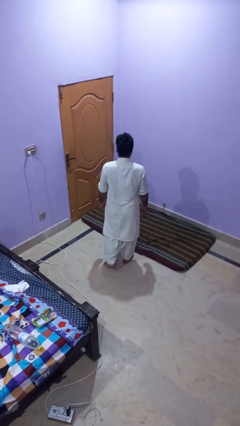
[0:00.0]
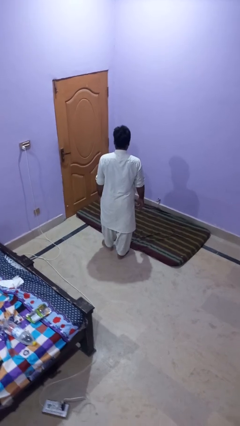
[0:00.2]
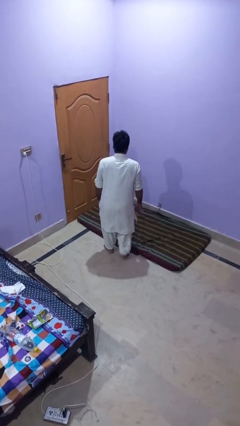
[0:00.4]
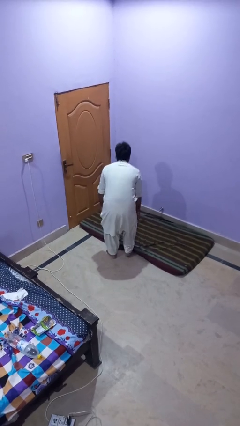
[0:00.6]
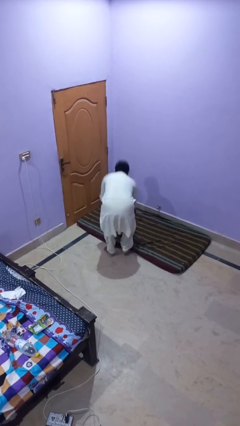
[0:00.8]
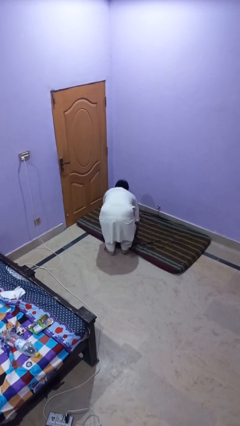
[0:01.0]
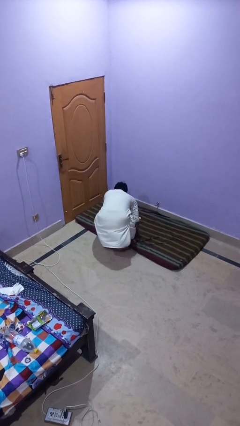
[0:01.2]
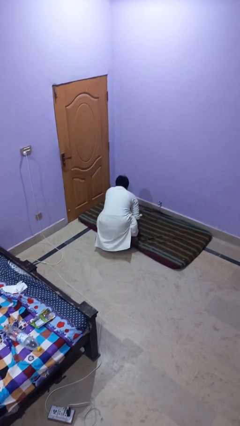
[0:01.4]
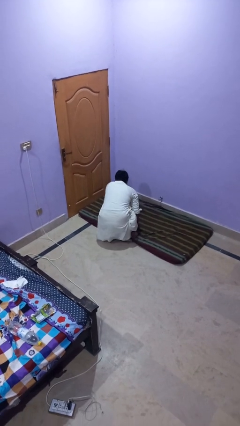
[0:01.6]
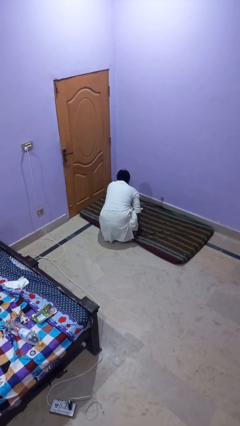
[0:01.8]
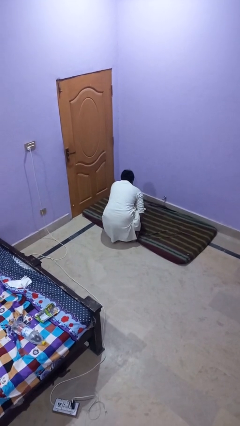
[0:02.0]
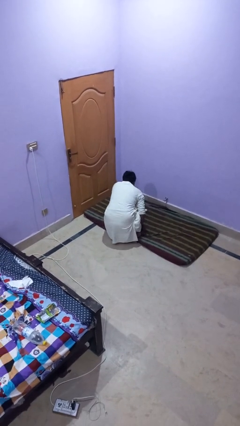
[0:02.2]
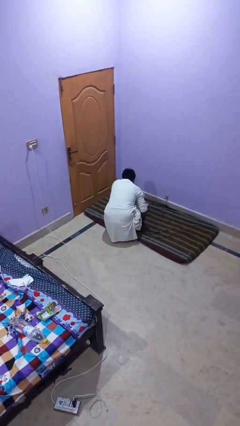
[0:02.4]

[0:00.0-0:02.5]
person trips on object on floor

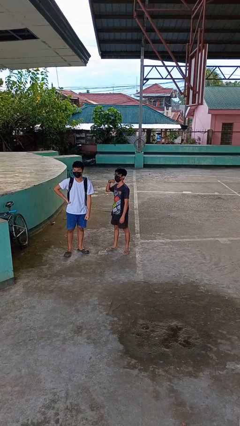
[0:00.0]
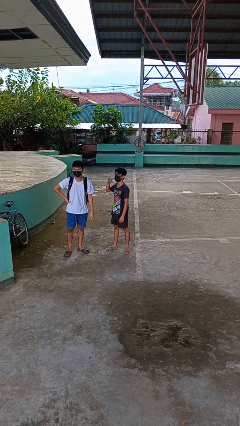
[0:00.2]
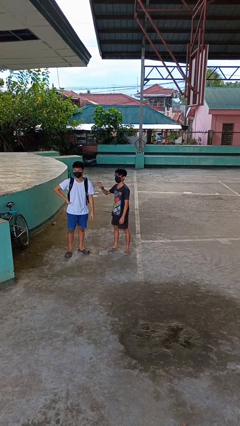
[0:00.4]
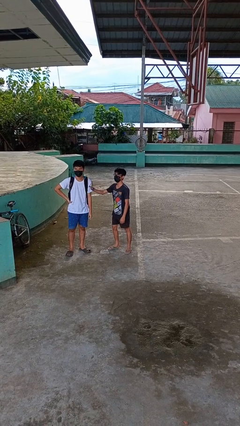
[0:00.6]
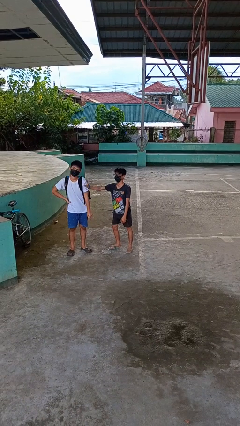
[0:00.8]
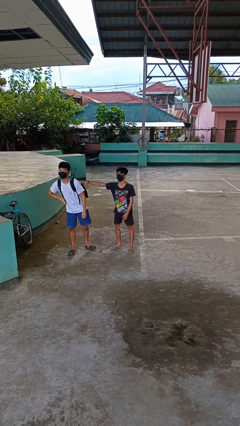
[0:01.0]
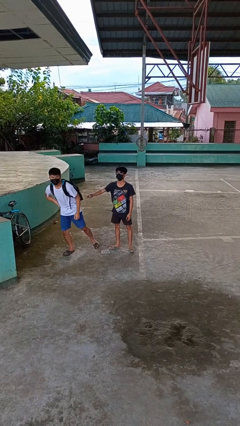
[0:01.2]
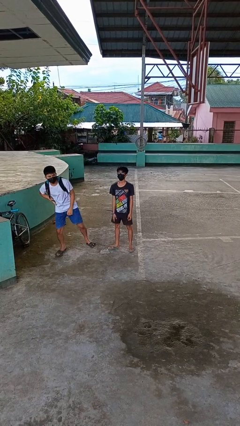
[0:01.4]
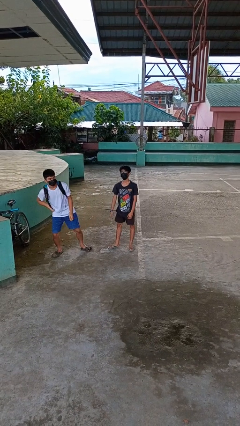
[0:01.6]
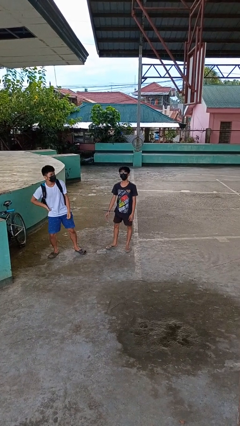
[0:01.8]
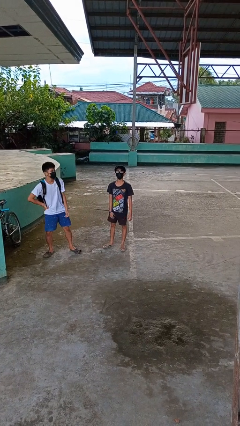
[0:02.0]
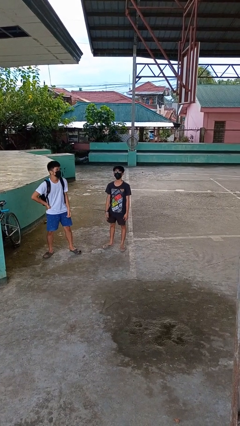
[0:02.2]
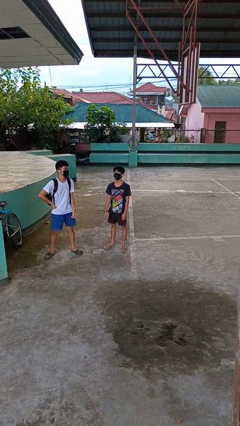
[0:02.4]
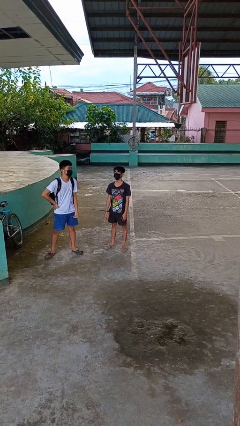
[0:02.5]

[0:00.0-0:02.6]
person shoves person

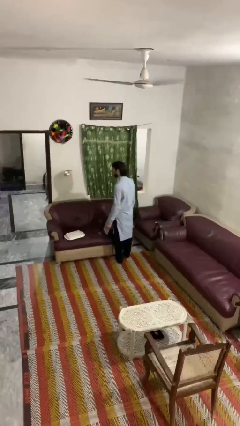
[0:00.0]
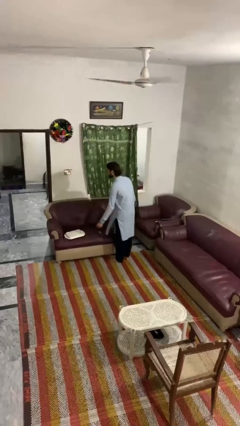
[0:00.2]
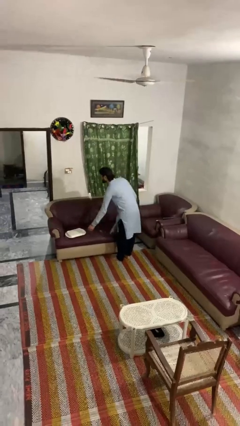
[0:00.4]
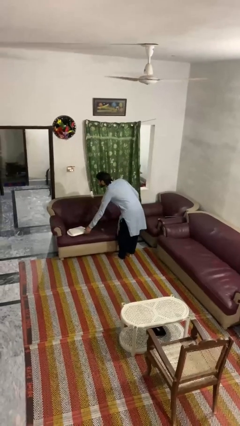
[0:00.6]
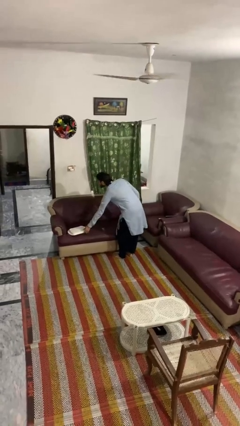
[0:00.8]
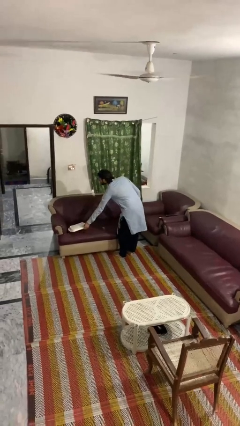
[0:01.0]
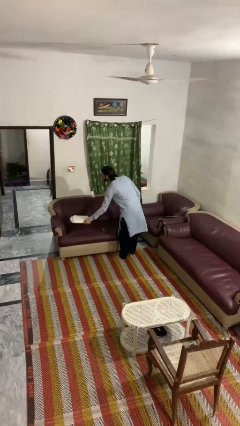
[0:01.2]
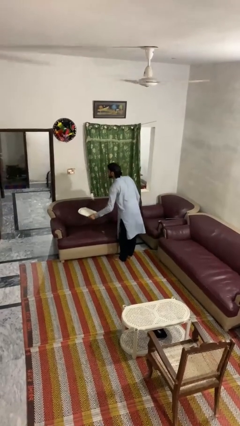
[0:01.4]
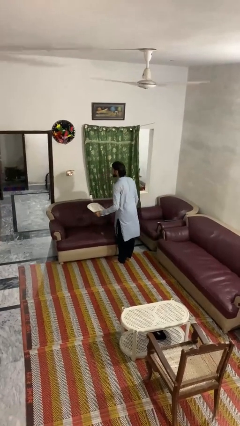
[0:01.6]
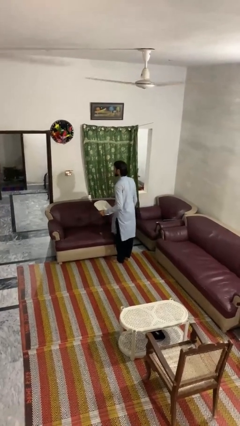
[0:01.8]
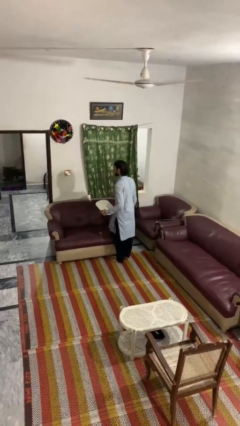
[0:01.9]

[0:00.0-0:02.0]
person picks up object from couch

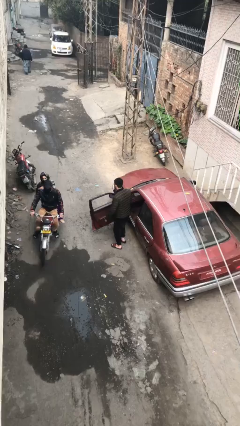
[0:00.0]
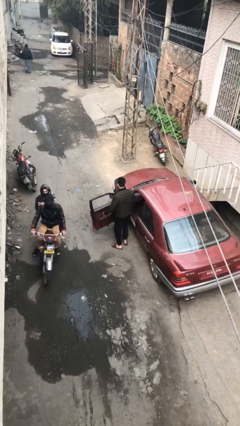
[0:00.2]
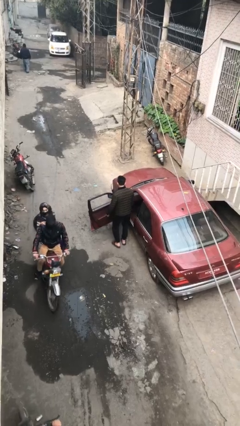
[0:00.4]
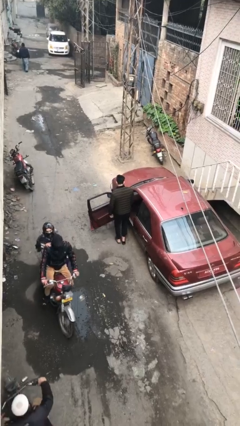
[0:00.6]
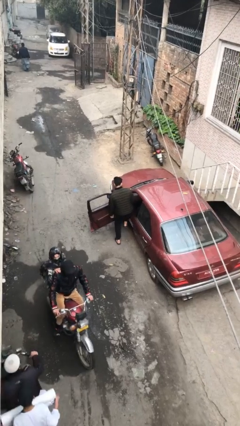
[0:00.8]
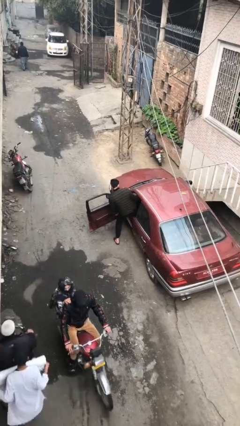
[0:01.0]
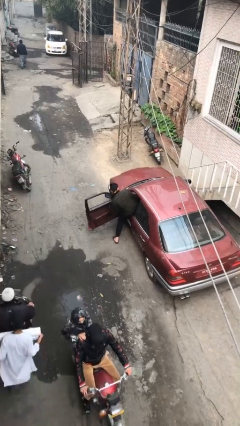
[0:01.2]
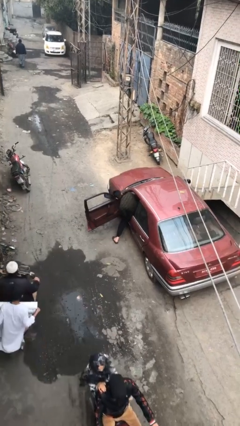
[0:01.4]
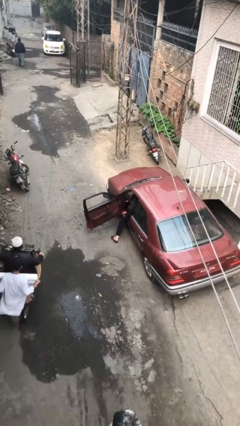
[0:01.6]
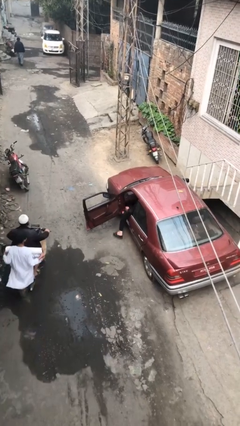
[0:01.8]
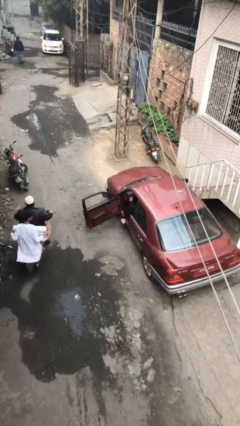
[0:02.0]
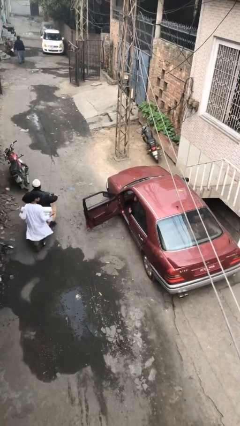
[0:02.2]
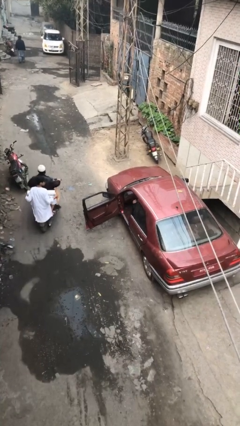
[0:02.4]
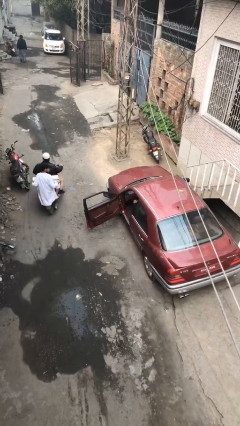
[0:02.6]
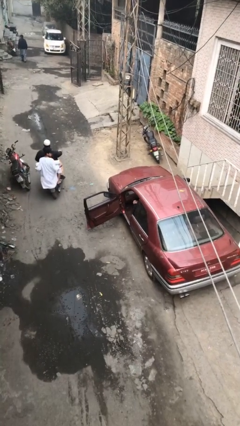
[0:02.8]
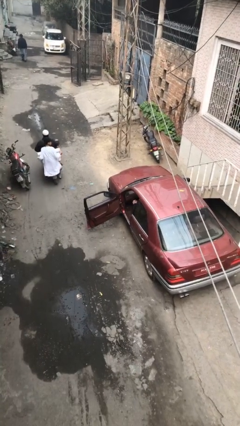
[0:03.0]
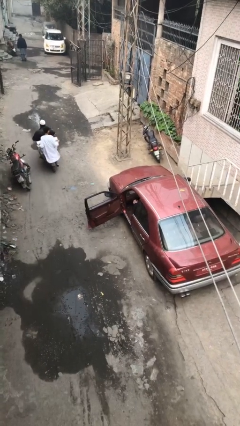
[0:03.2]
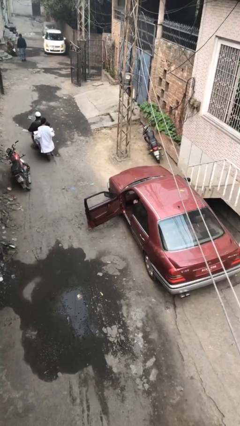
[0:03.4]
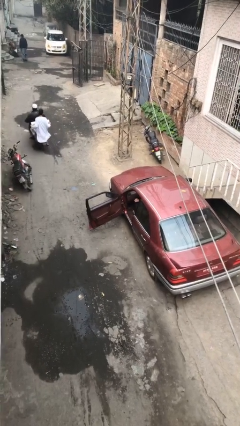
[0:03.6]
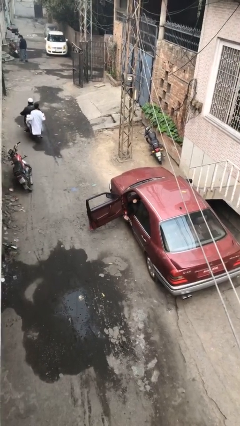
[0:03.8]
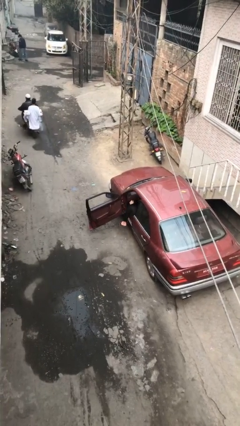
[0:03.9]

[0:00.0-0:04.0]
person enters car

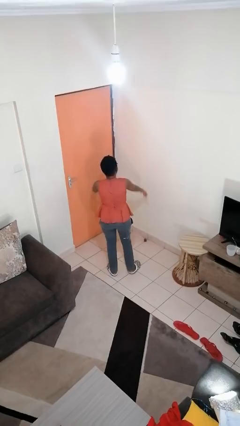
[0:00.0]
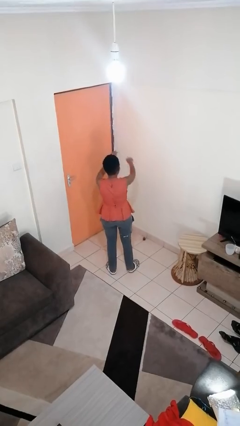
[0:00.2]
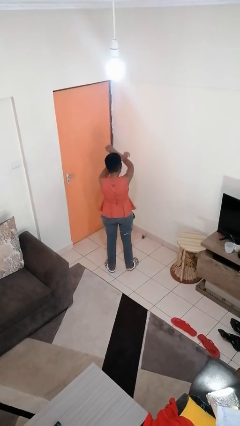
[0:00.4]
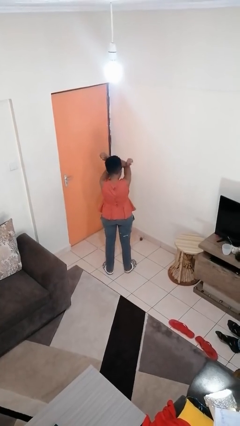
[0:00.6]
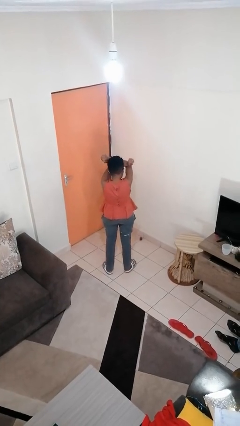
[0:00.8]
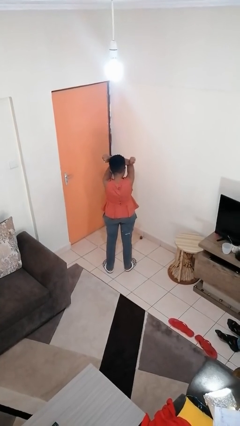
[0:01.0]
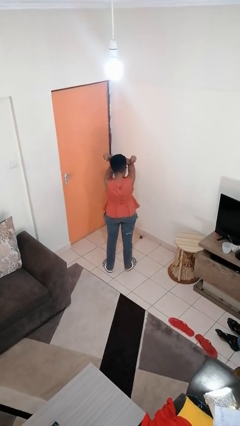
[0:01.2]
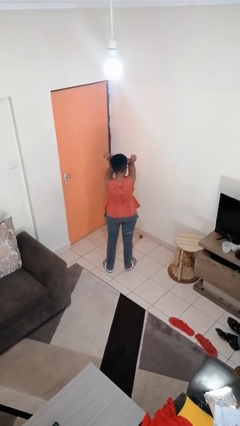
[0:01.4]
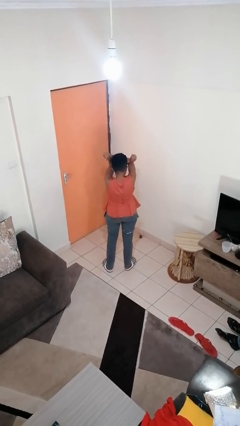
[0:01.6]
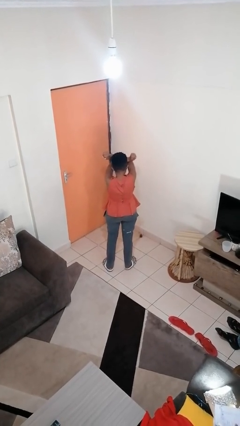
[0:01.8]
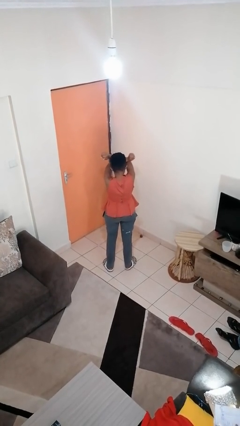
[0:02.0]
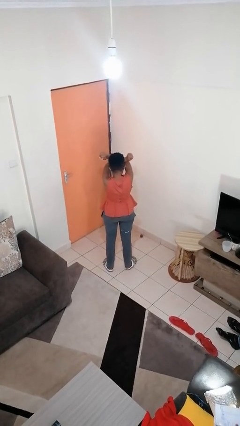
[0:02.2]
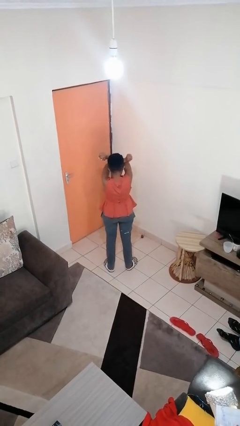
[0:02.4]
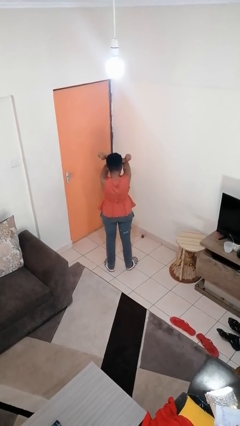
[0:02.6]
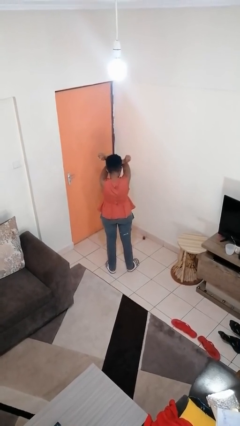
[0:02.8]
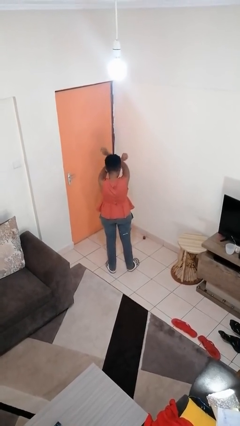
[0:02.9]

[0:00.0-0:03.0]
person gestures arms x

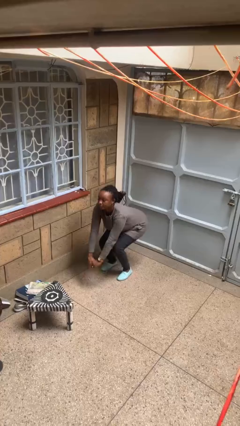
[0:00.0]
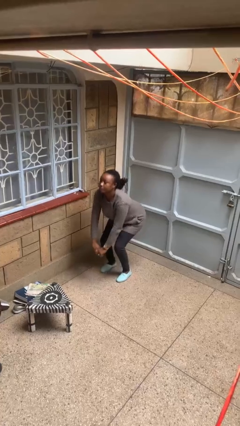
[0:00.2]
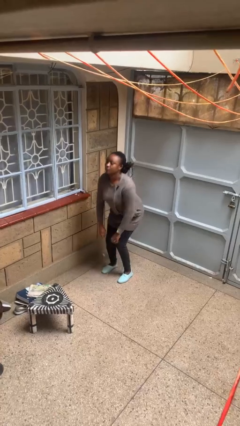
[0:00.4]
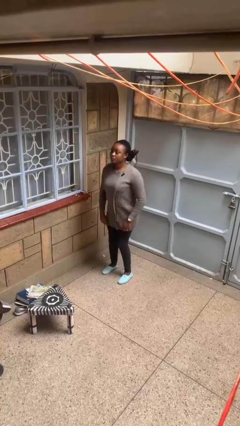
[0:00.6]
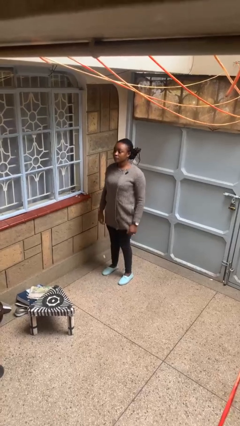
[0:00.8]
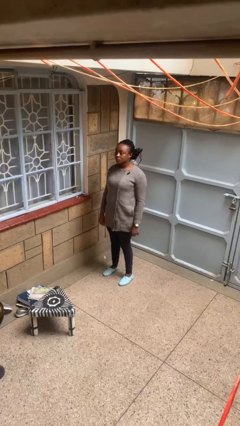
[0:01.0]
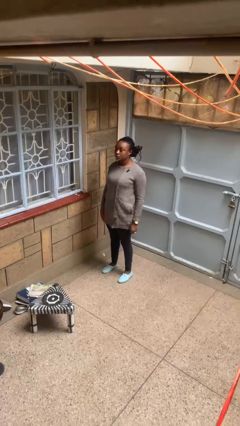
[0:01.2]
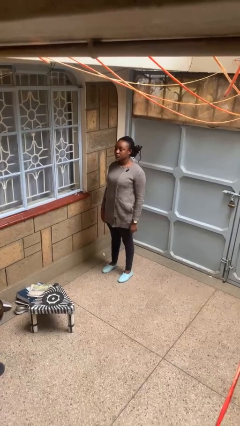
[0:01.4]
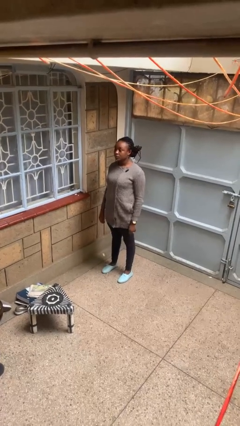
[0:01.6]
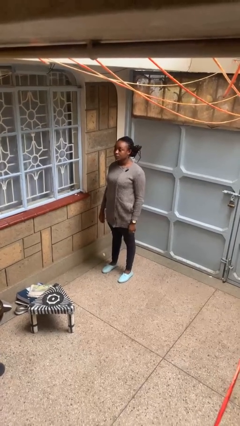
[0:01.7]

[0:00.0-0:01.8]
person stands up

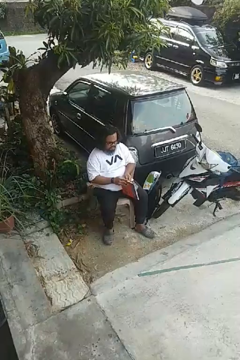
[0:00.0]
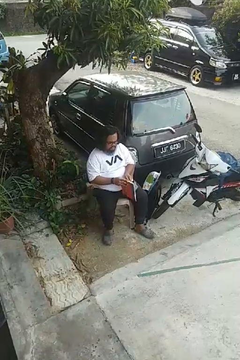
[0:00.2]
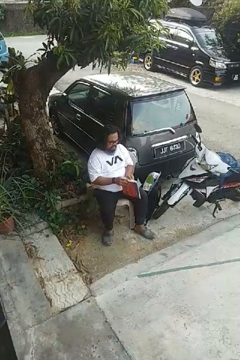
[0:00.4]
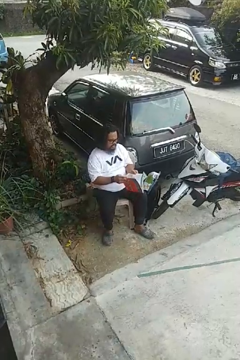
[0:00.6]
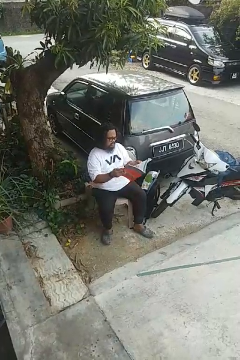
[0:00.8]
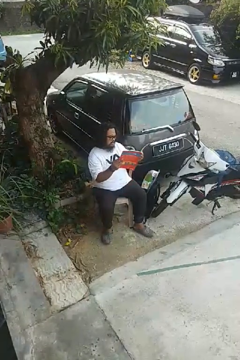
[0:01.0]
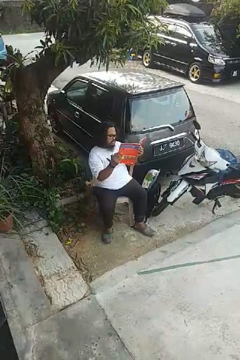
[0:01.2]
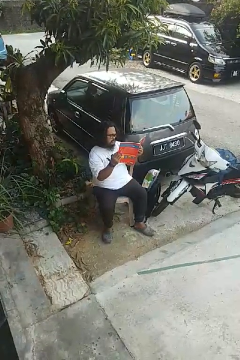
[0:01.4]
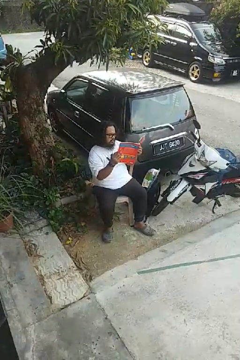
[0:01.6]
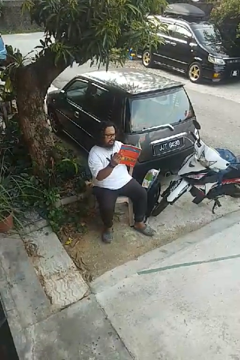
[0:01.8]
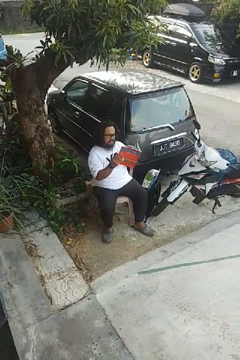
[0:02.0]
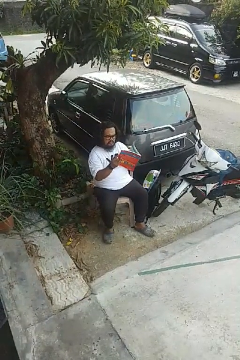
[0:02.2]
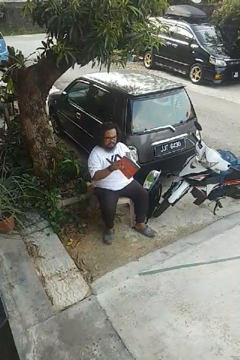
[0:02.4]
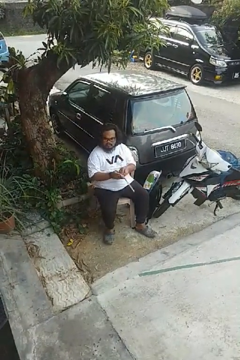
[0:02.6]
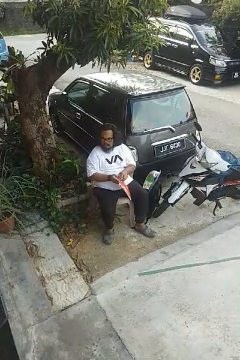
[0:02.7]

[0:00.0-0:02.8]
person reads magazine
